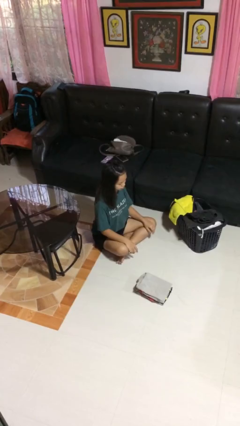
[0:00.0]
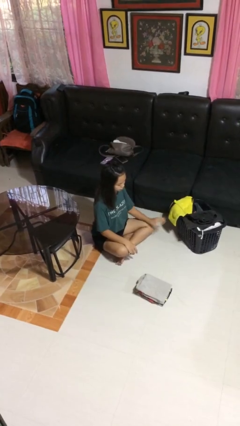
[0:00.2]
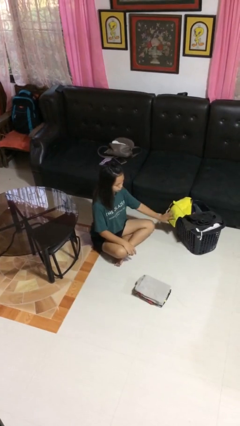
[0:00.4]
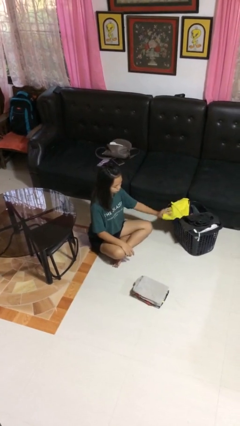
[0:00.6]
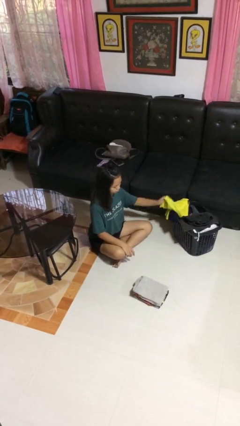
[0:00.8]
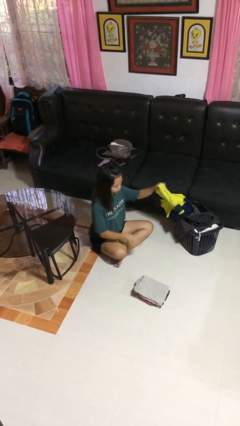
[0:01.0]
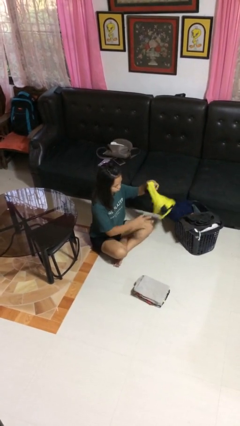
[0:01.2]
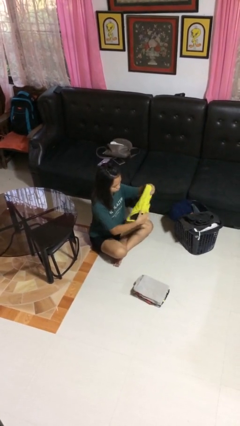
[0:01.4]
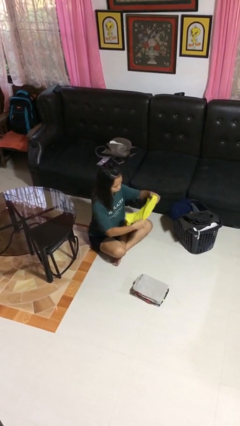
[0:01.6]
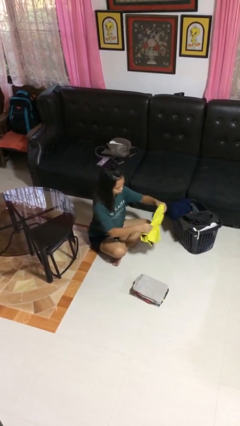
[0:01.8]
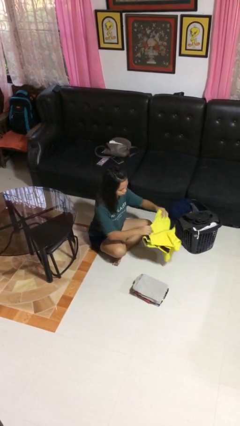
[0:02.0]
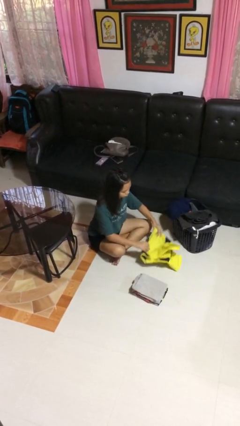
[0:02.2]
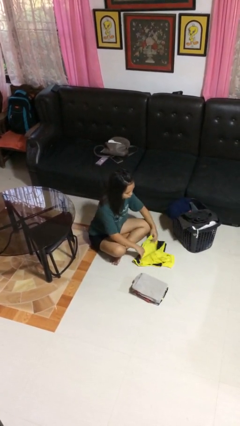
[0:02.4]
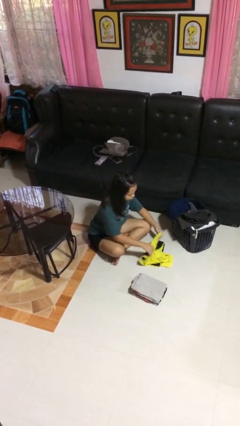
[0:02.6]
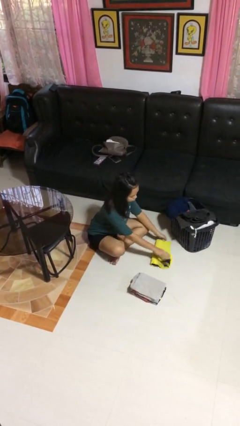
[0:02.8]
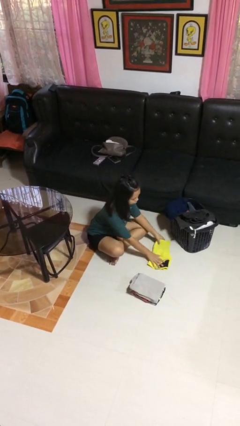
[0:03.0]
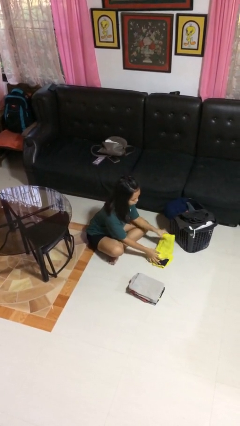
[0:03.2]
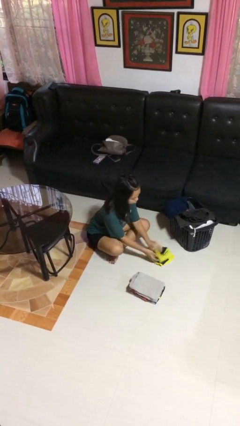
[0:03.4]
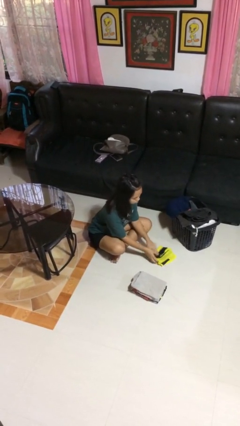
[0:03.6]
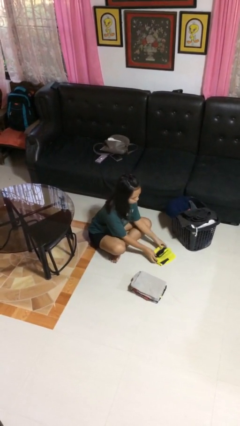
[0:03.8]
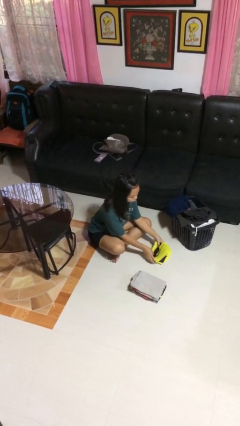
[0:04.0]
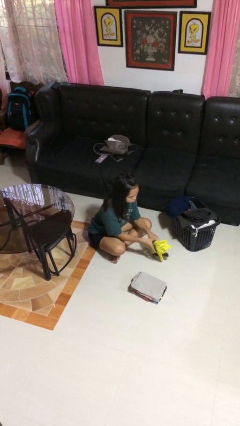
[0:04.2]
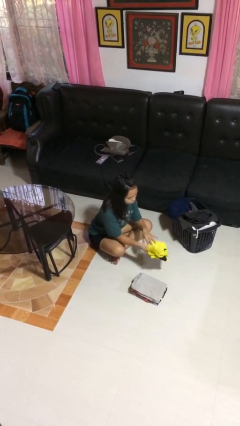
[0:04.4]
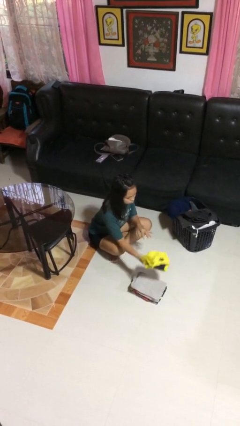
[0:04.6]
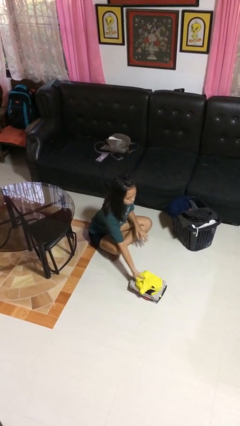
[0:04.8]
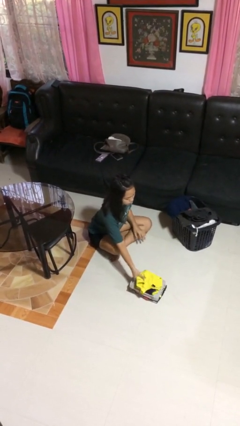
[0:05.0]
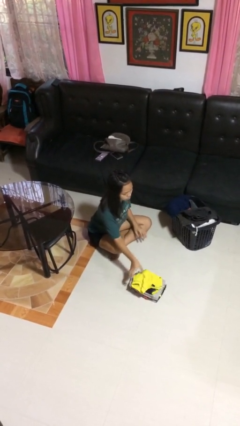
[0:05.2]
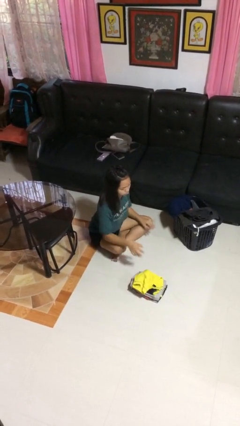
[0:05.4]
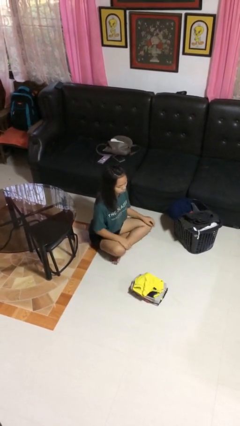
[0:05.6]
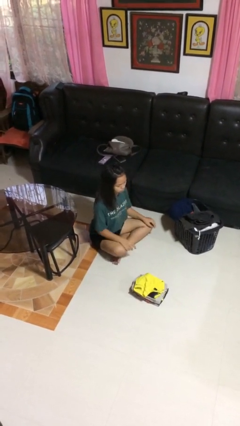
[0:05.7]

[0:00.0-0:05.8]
person folds shirt

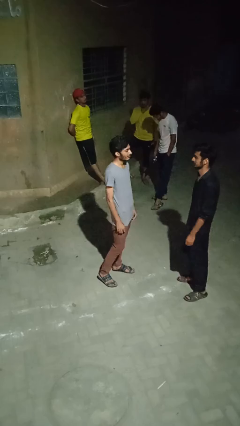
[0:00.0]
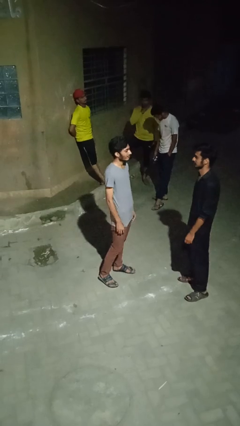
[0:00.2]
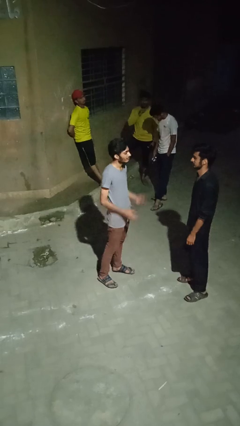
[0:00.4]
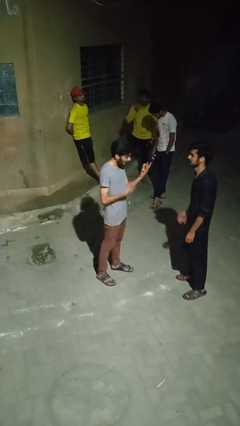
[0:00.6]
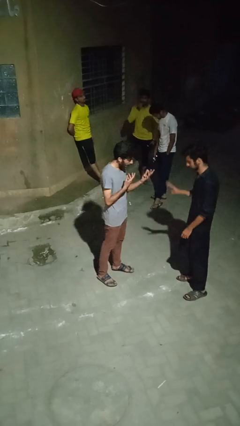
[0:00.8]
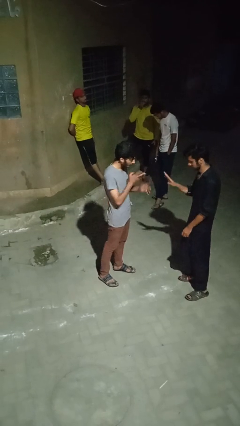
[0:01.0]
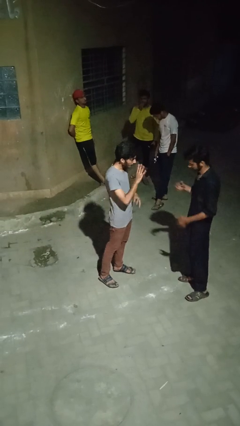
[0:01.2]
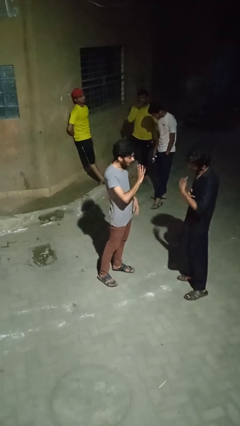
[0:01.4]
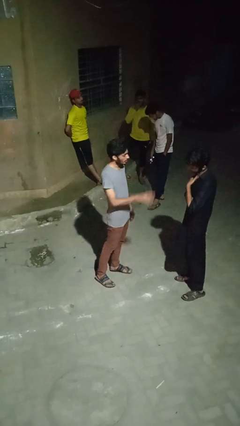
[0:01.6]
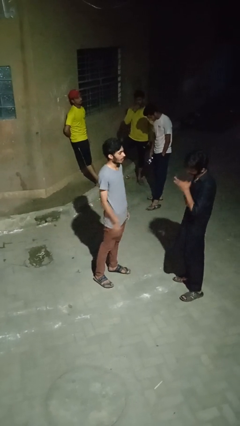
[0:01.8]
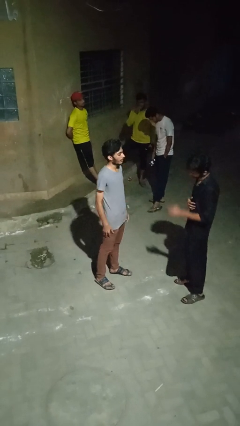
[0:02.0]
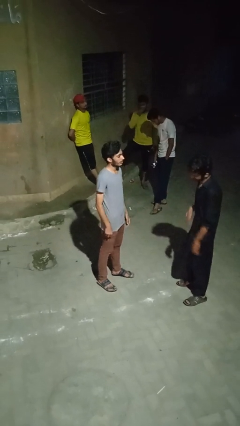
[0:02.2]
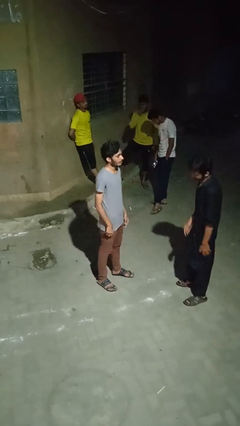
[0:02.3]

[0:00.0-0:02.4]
person talks to person

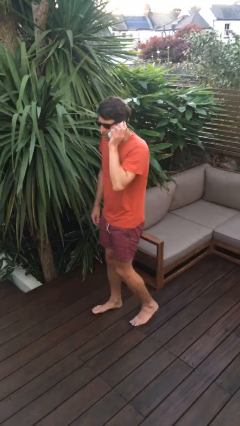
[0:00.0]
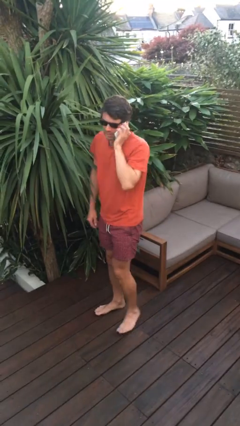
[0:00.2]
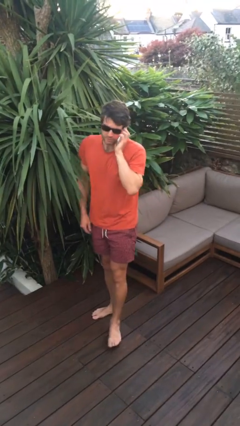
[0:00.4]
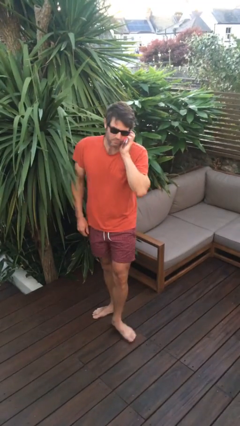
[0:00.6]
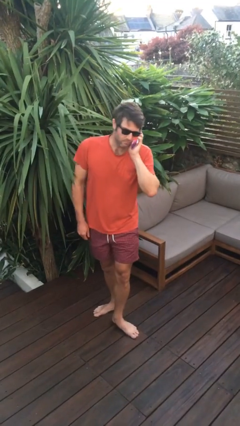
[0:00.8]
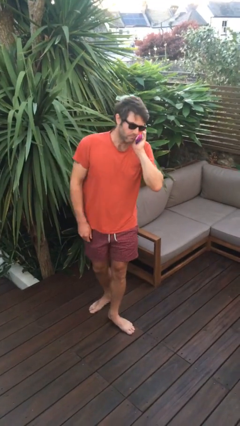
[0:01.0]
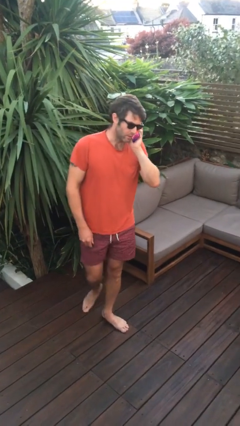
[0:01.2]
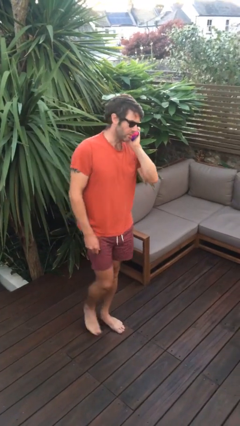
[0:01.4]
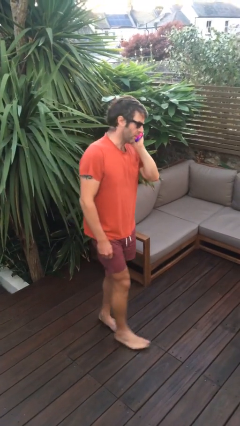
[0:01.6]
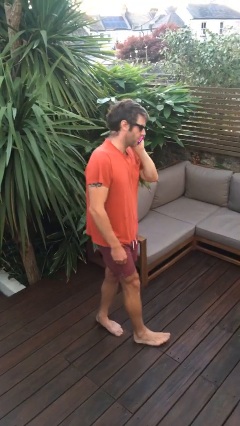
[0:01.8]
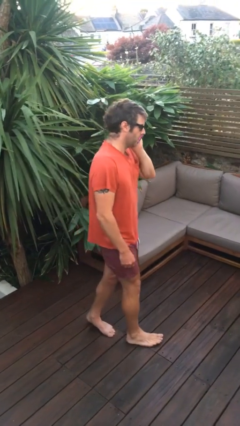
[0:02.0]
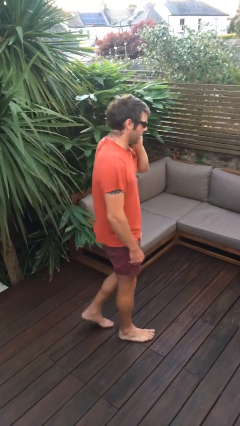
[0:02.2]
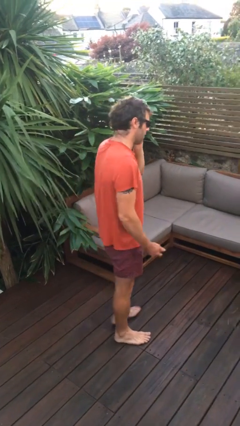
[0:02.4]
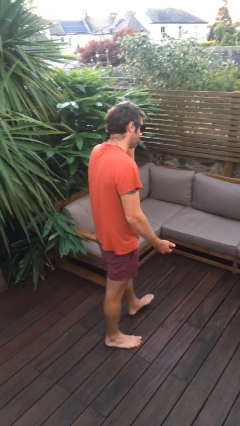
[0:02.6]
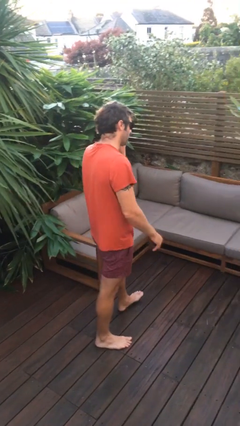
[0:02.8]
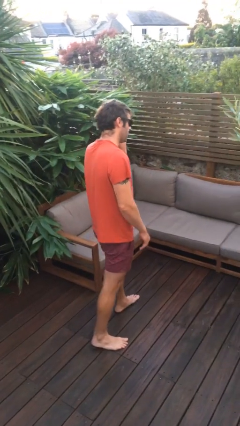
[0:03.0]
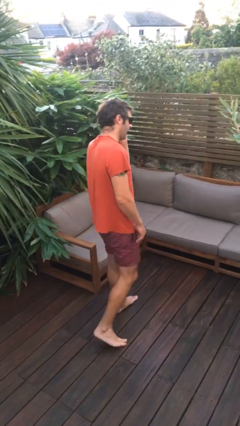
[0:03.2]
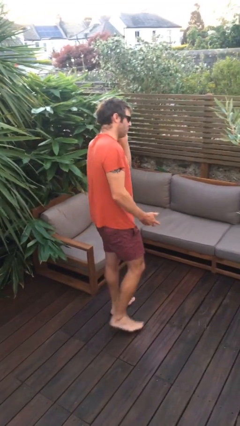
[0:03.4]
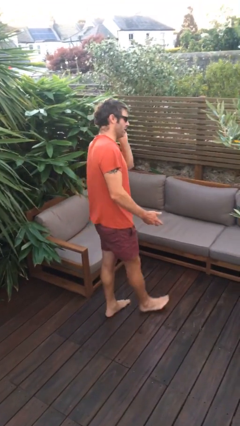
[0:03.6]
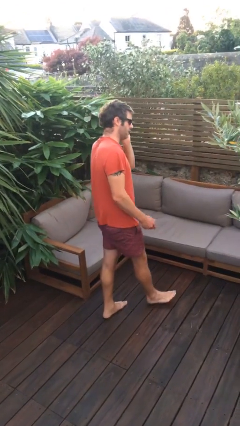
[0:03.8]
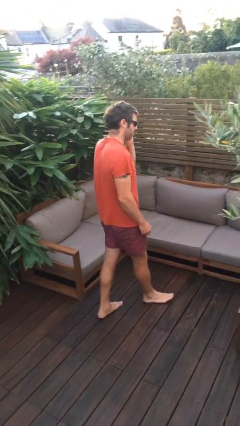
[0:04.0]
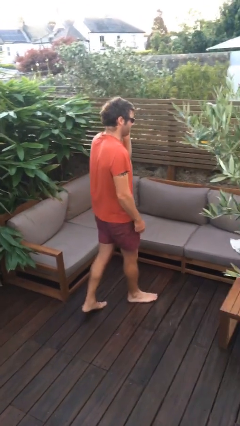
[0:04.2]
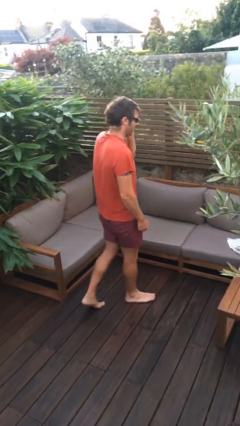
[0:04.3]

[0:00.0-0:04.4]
person talks on phone

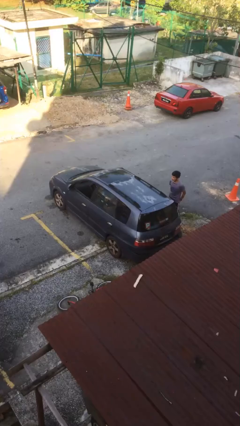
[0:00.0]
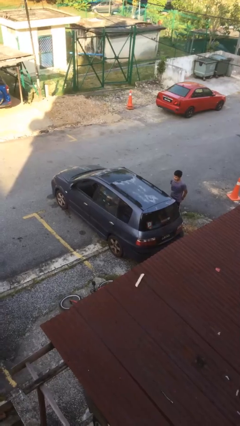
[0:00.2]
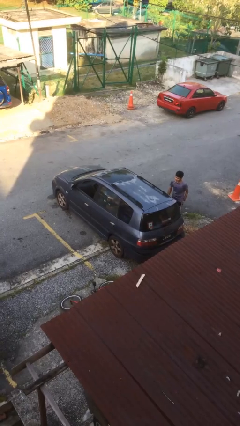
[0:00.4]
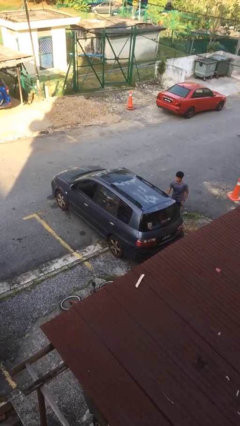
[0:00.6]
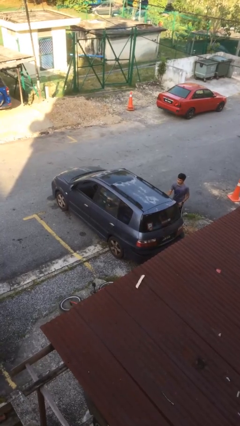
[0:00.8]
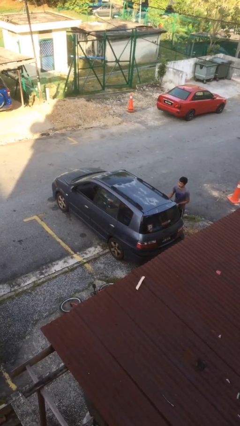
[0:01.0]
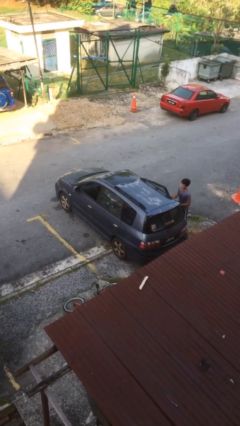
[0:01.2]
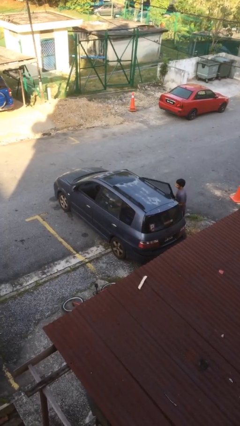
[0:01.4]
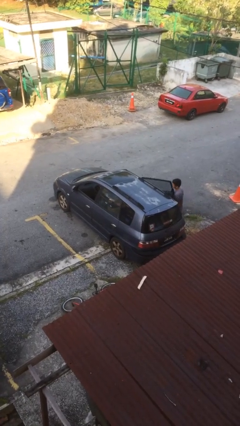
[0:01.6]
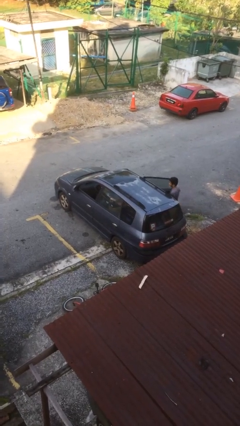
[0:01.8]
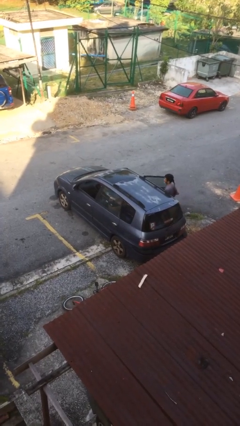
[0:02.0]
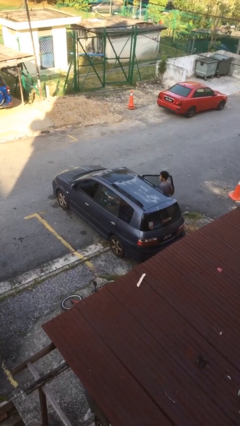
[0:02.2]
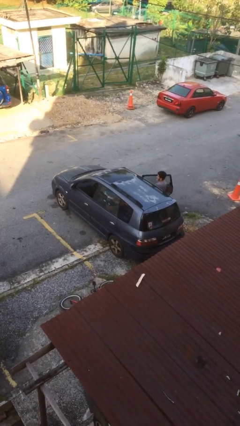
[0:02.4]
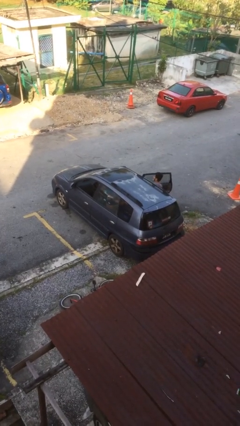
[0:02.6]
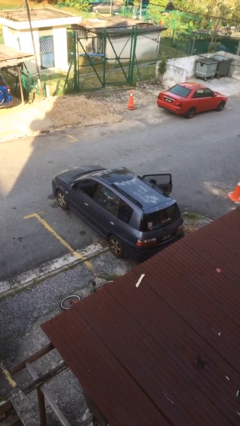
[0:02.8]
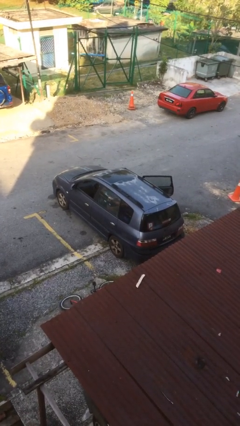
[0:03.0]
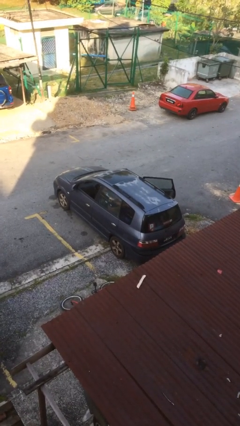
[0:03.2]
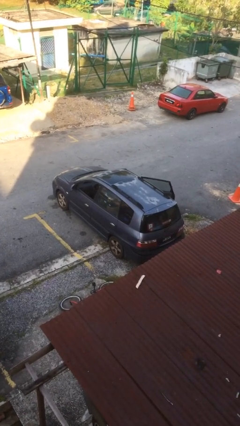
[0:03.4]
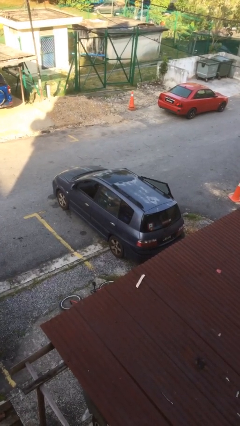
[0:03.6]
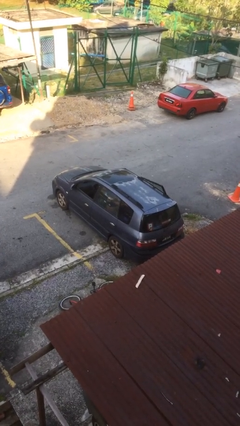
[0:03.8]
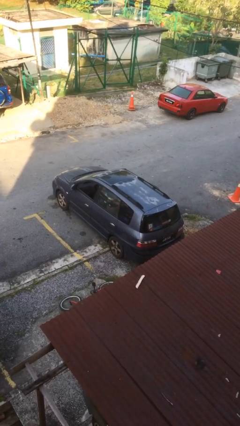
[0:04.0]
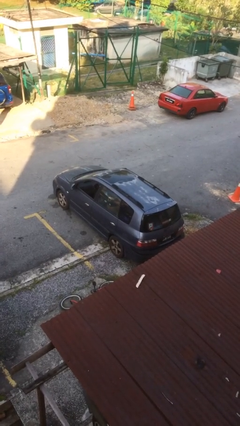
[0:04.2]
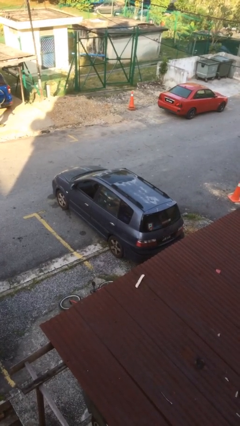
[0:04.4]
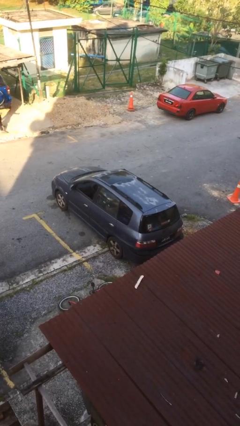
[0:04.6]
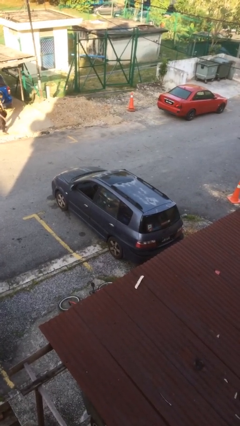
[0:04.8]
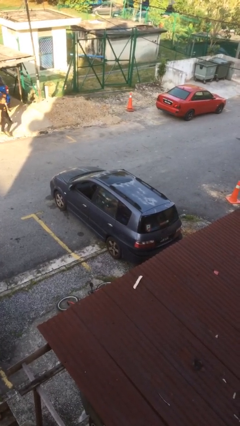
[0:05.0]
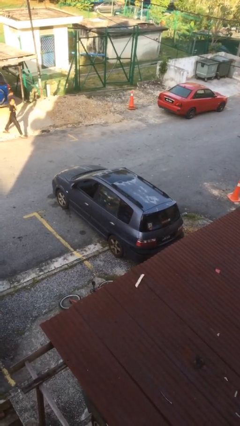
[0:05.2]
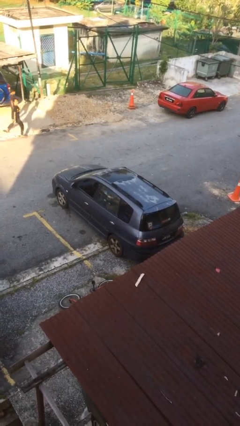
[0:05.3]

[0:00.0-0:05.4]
car picks up person
